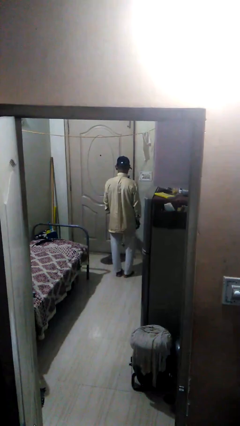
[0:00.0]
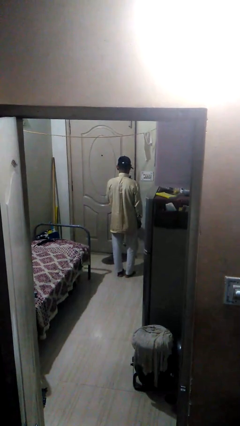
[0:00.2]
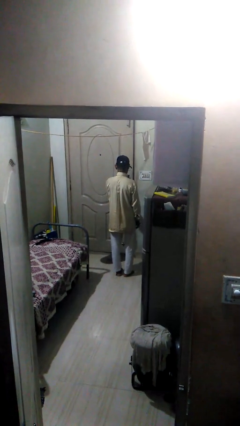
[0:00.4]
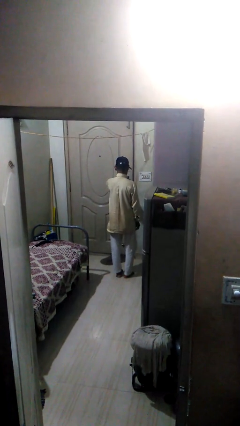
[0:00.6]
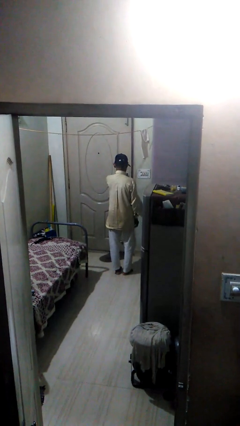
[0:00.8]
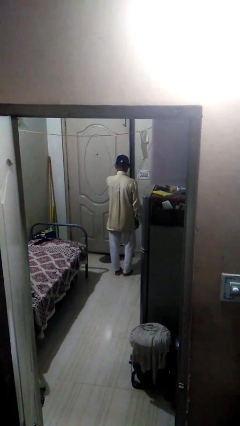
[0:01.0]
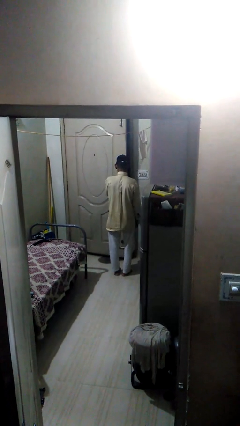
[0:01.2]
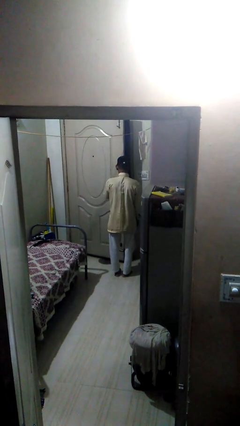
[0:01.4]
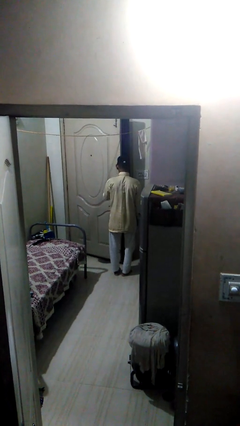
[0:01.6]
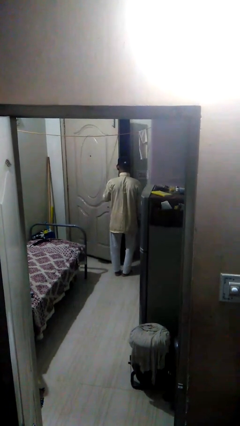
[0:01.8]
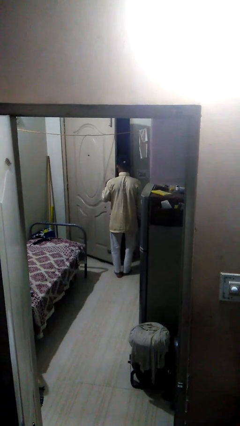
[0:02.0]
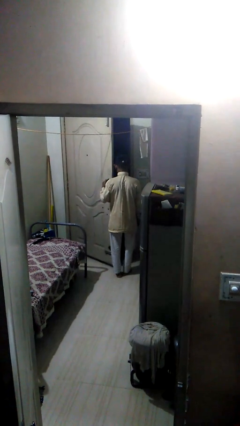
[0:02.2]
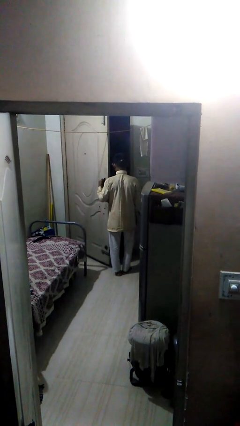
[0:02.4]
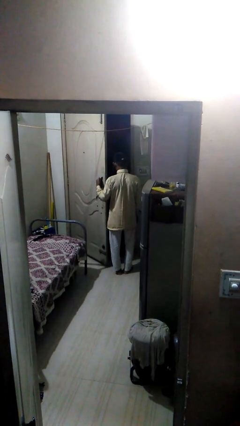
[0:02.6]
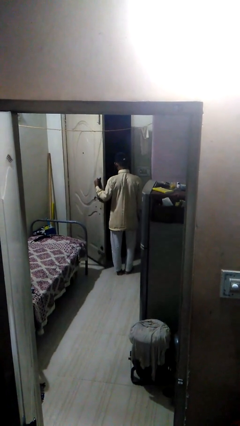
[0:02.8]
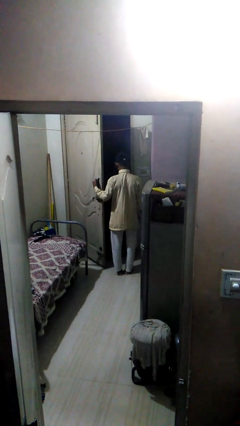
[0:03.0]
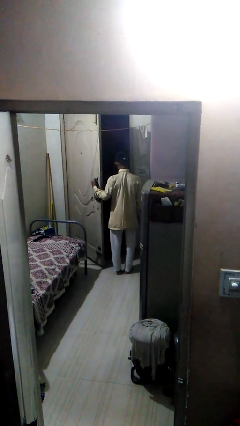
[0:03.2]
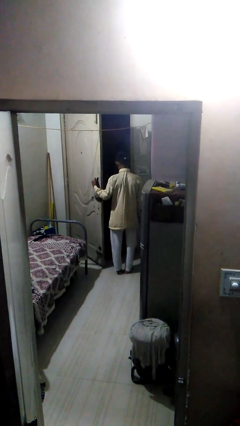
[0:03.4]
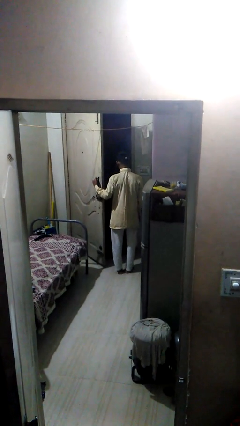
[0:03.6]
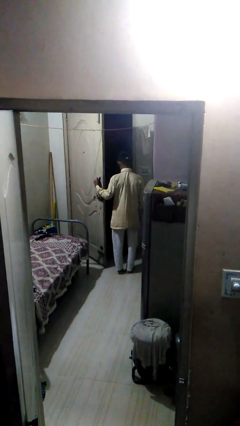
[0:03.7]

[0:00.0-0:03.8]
person opens facility door

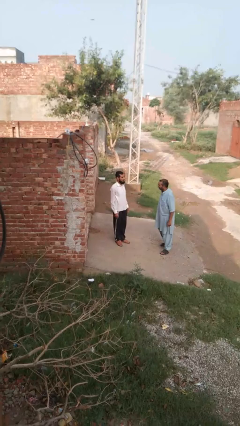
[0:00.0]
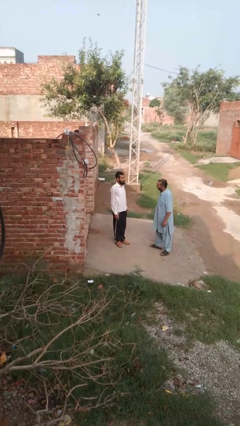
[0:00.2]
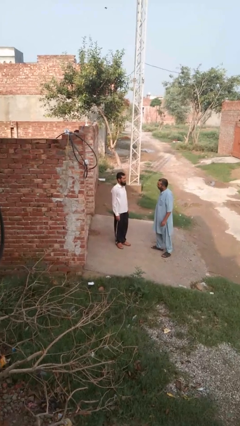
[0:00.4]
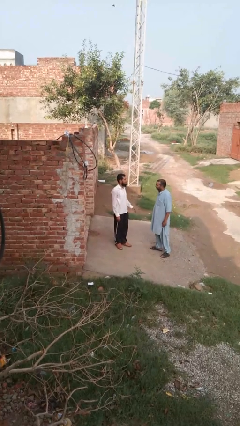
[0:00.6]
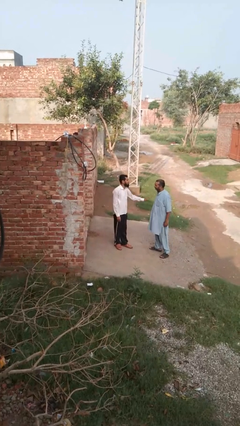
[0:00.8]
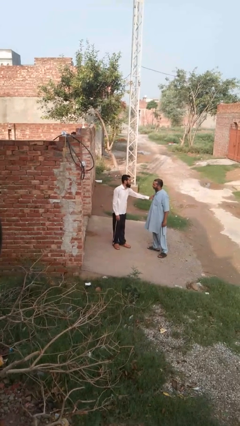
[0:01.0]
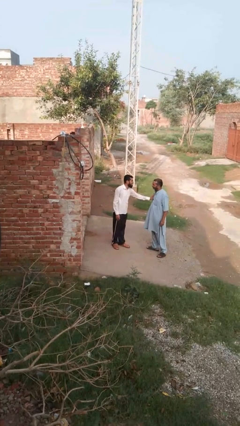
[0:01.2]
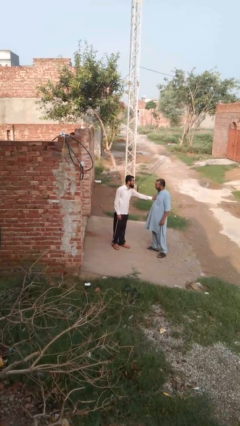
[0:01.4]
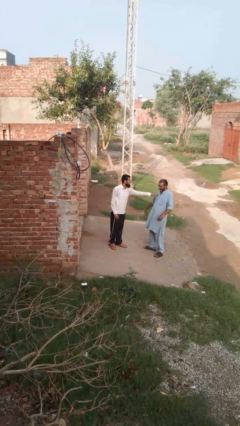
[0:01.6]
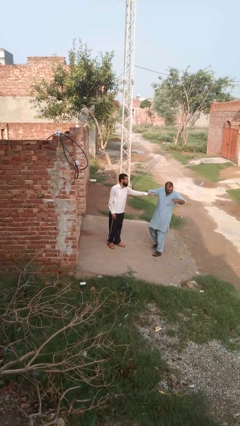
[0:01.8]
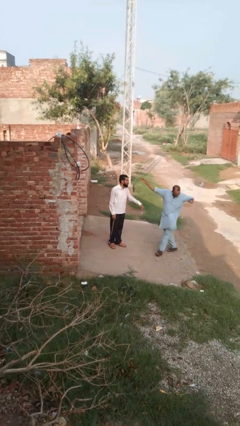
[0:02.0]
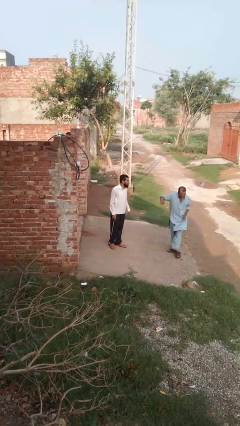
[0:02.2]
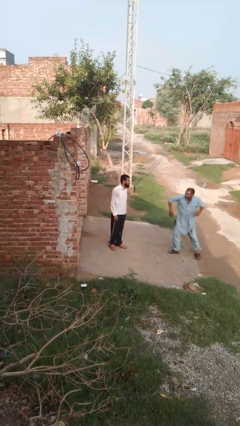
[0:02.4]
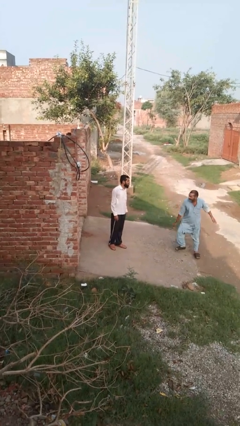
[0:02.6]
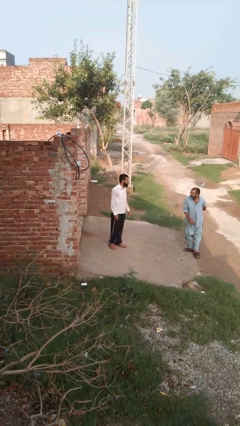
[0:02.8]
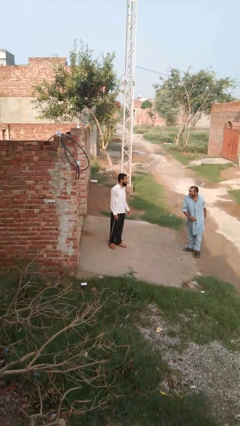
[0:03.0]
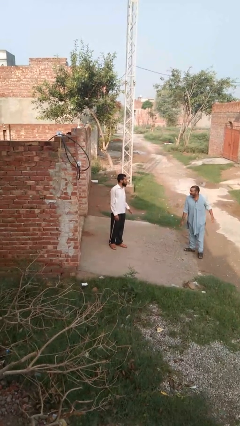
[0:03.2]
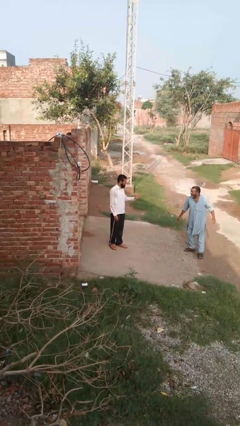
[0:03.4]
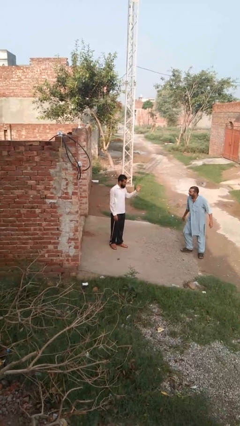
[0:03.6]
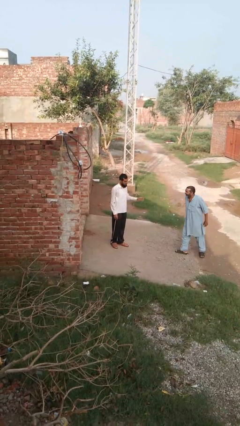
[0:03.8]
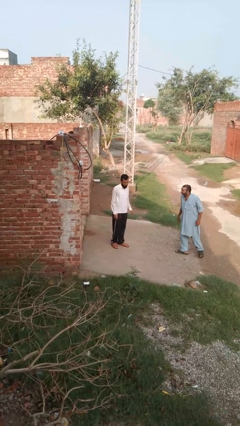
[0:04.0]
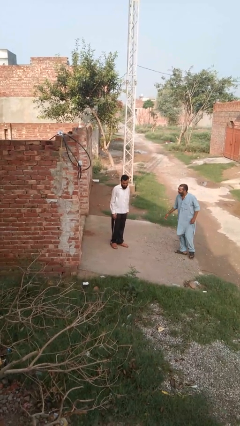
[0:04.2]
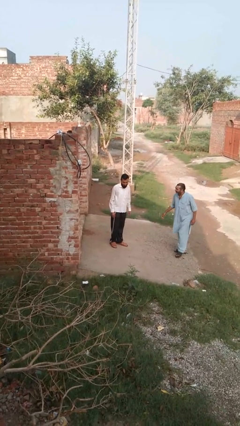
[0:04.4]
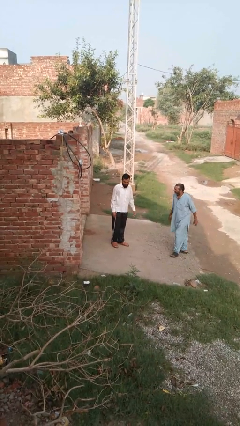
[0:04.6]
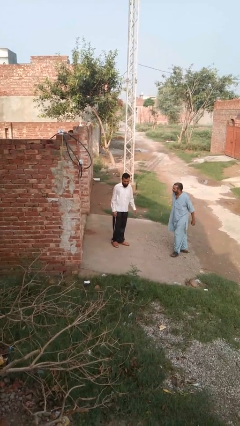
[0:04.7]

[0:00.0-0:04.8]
person shoves person

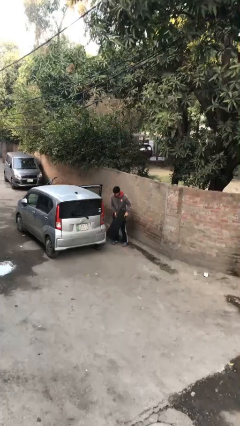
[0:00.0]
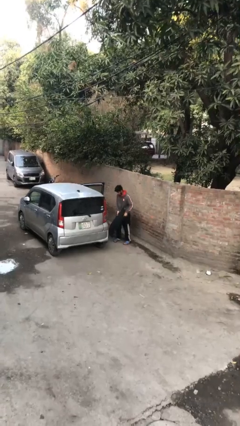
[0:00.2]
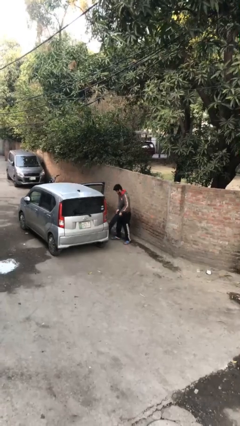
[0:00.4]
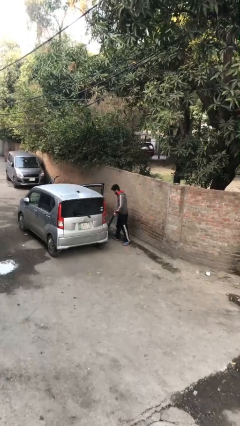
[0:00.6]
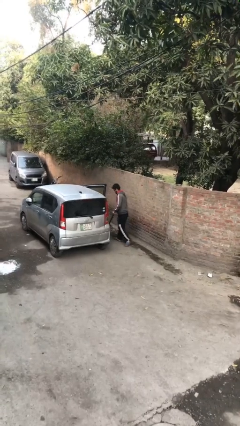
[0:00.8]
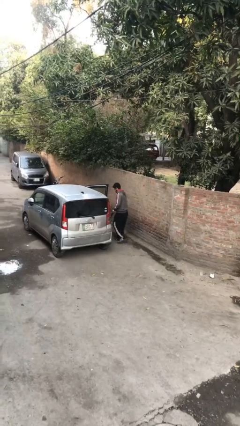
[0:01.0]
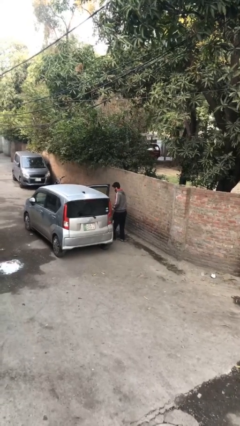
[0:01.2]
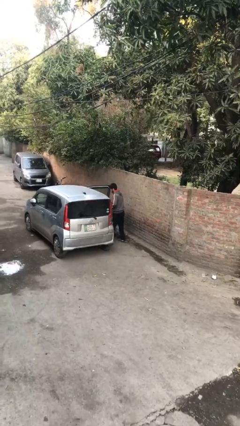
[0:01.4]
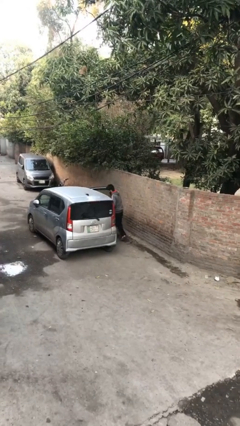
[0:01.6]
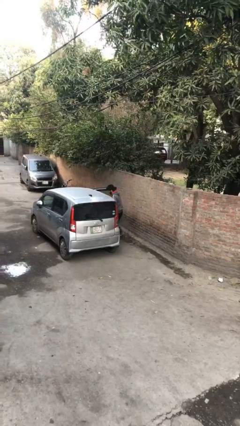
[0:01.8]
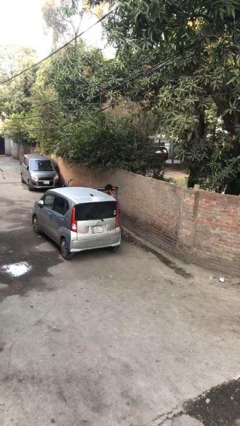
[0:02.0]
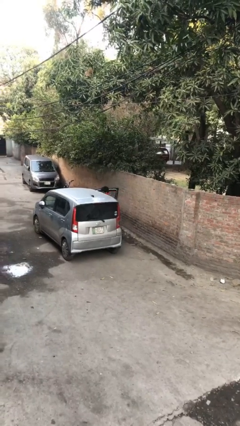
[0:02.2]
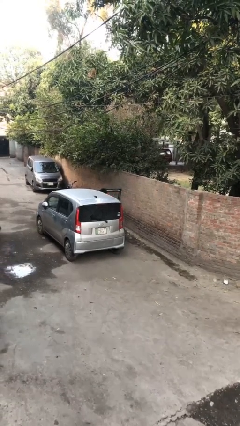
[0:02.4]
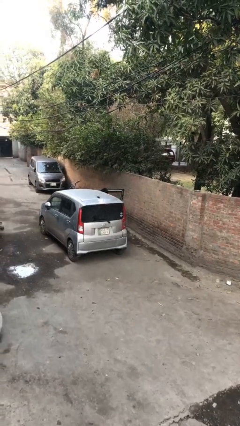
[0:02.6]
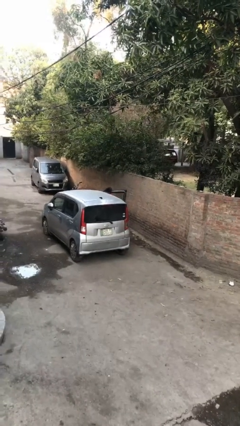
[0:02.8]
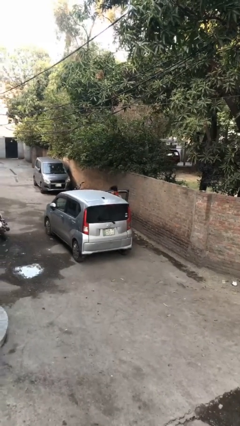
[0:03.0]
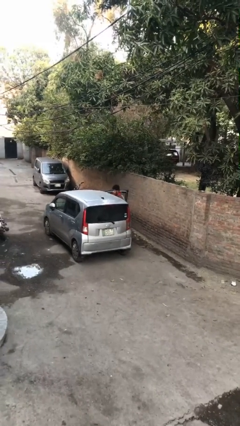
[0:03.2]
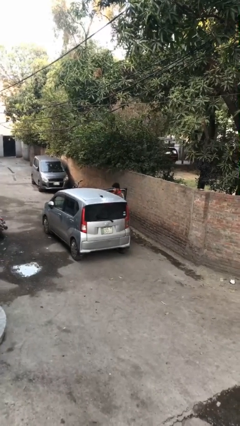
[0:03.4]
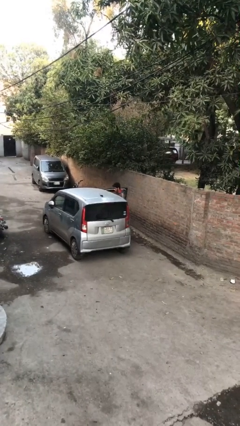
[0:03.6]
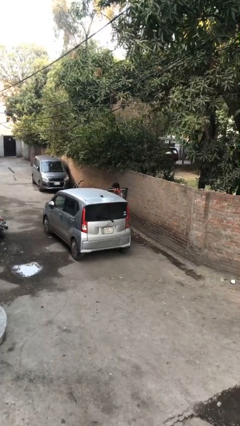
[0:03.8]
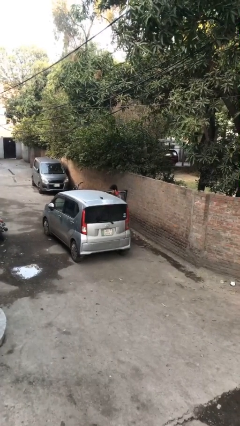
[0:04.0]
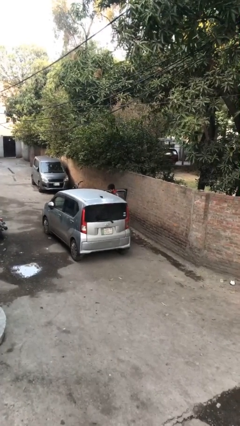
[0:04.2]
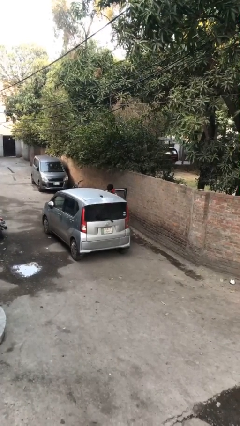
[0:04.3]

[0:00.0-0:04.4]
person loads car

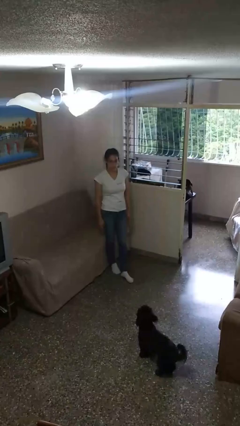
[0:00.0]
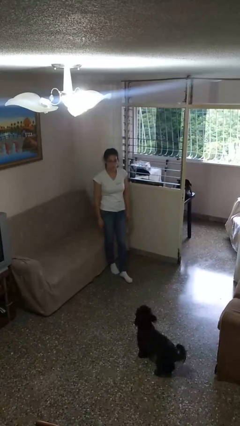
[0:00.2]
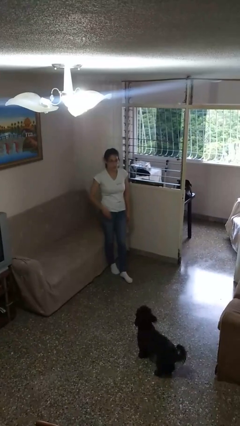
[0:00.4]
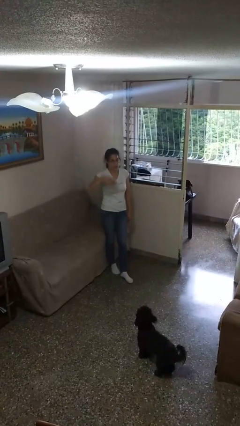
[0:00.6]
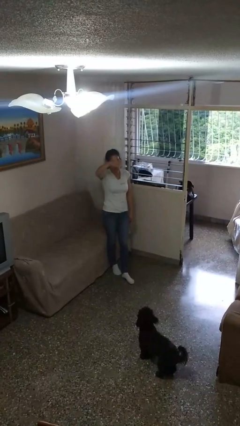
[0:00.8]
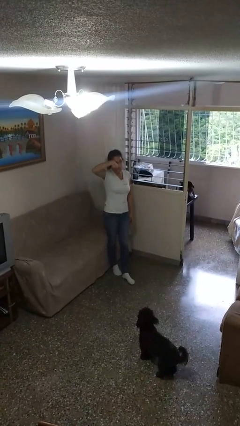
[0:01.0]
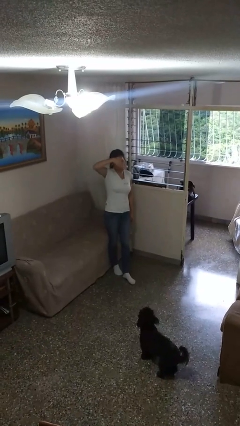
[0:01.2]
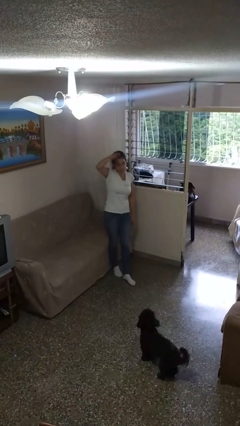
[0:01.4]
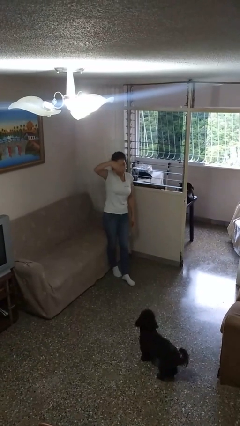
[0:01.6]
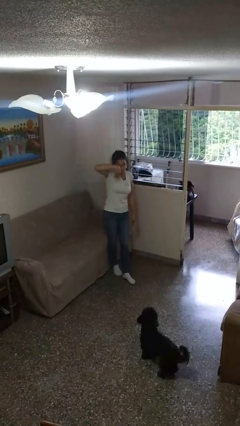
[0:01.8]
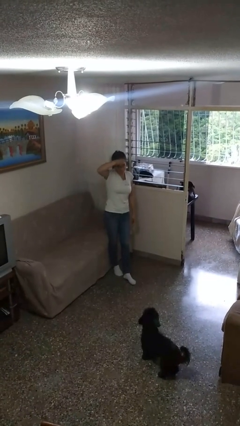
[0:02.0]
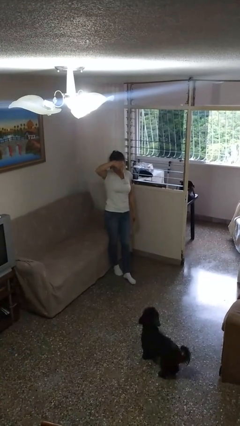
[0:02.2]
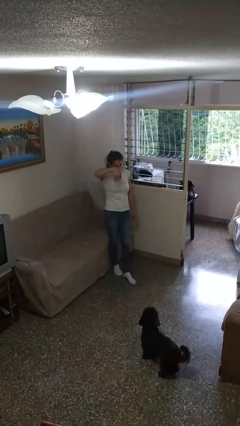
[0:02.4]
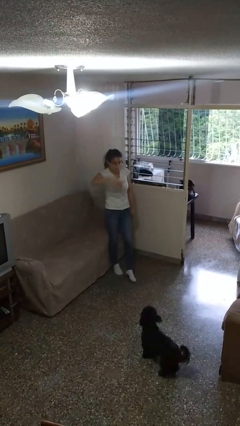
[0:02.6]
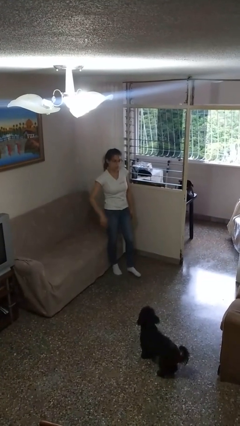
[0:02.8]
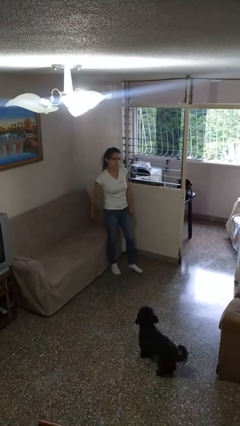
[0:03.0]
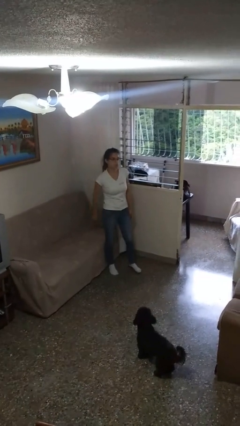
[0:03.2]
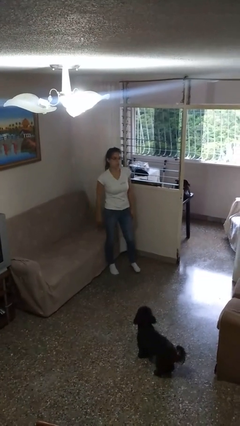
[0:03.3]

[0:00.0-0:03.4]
person gestures come here

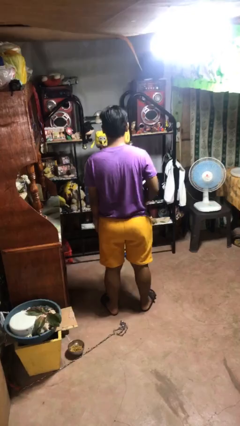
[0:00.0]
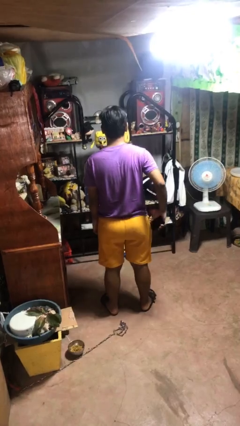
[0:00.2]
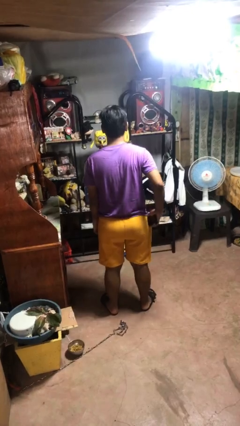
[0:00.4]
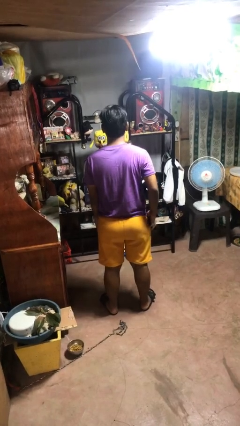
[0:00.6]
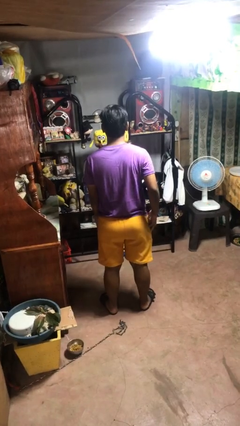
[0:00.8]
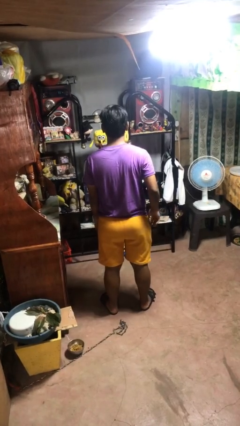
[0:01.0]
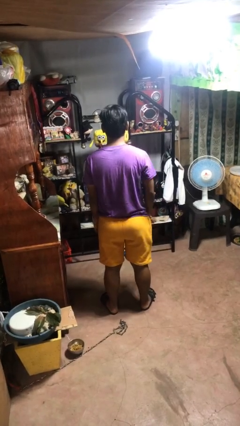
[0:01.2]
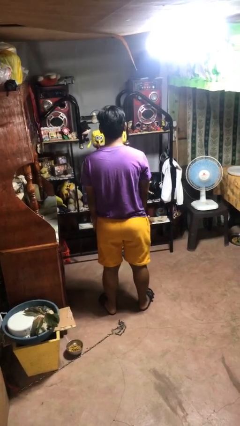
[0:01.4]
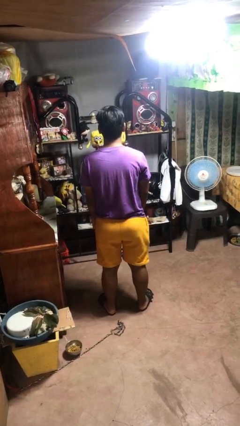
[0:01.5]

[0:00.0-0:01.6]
person puts phone into pocket
